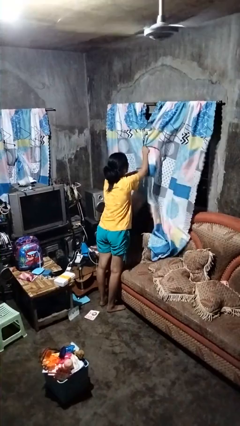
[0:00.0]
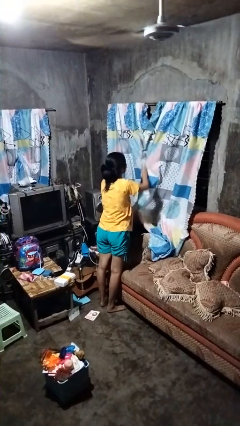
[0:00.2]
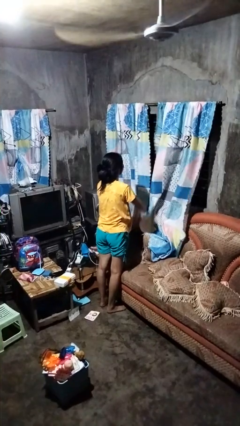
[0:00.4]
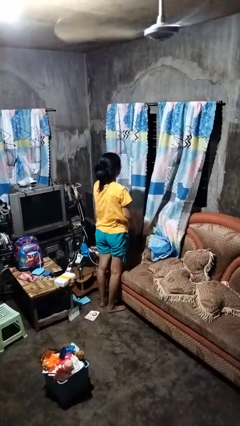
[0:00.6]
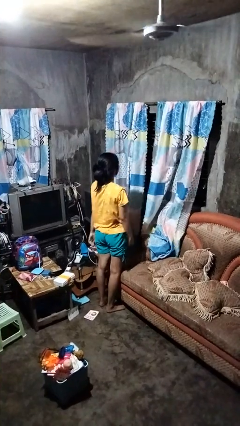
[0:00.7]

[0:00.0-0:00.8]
person opens curtains

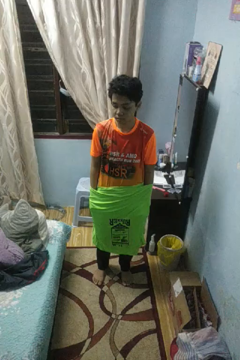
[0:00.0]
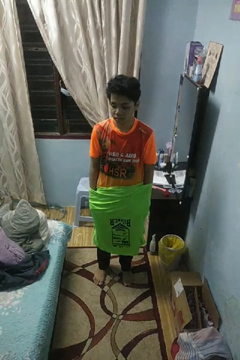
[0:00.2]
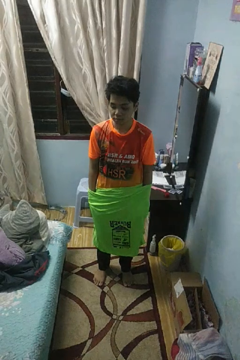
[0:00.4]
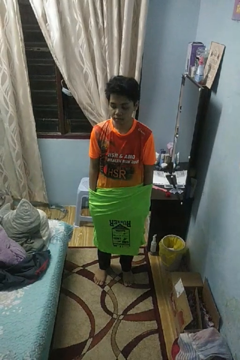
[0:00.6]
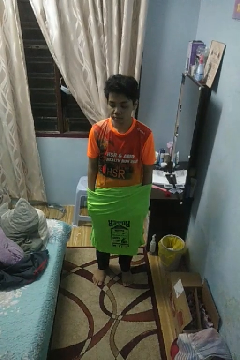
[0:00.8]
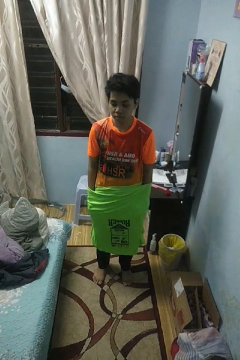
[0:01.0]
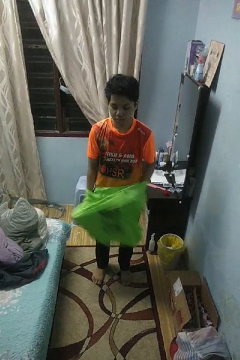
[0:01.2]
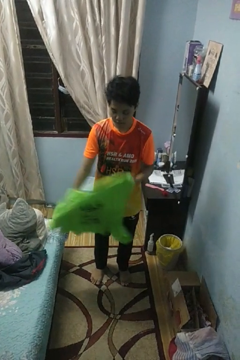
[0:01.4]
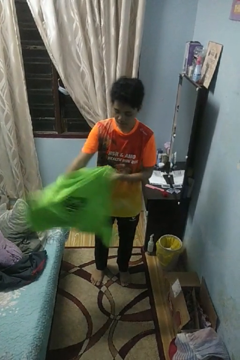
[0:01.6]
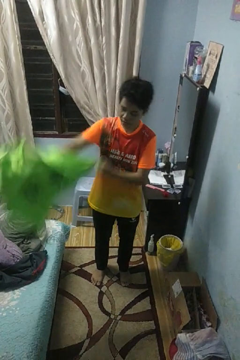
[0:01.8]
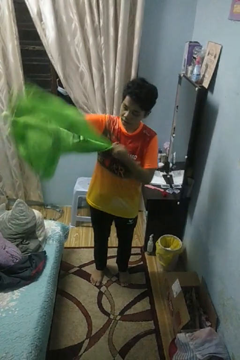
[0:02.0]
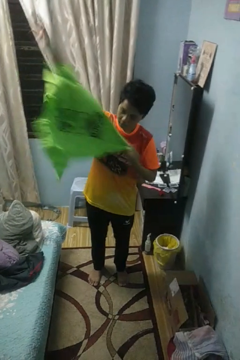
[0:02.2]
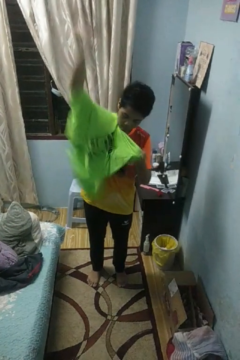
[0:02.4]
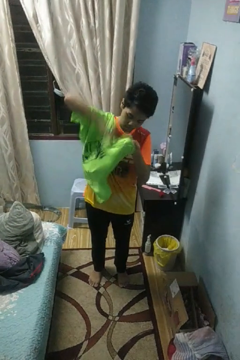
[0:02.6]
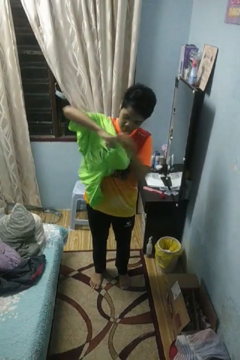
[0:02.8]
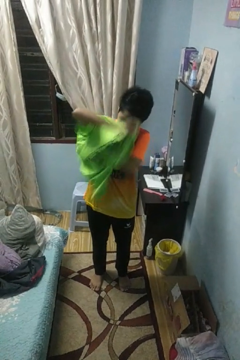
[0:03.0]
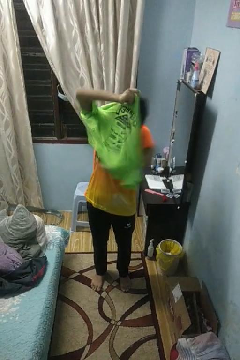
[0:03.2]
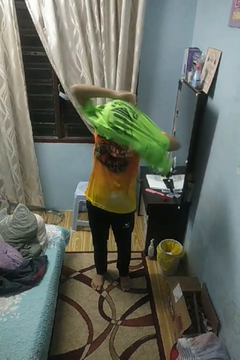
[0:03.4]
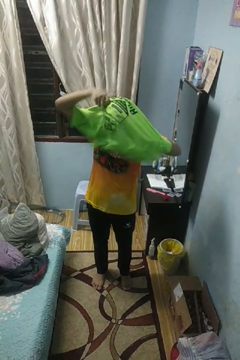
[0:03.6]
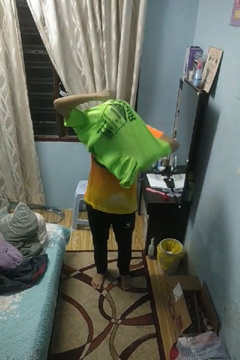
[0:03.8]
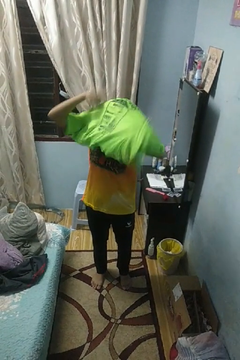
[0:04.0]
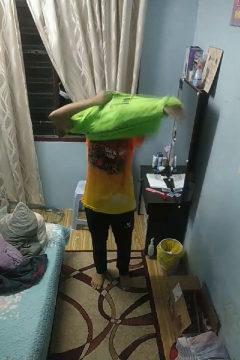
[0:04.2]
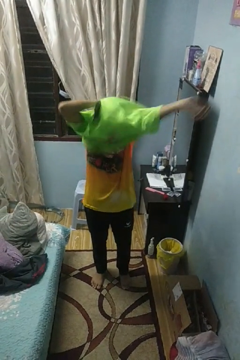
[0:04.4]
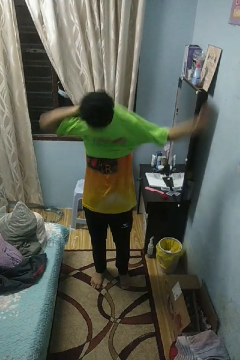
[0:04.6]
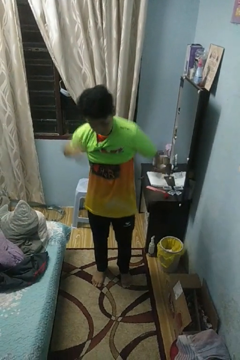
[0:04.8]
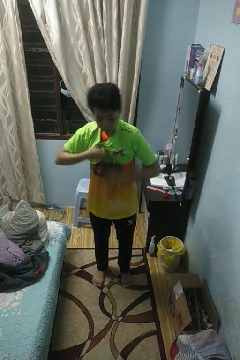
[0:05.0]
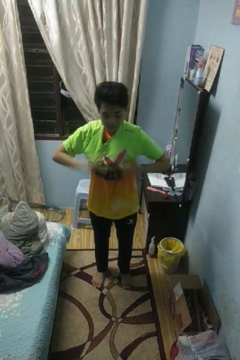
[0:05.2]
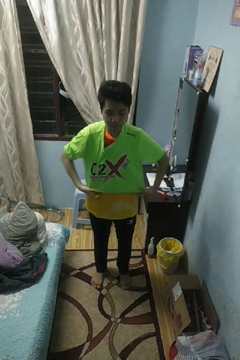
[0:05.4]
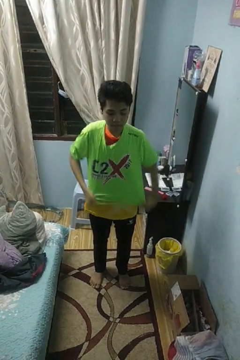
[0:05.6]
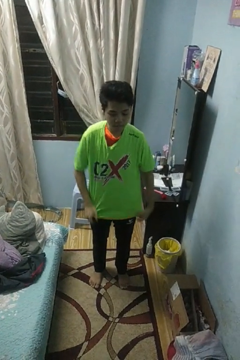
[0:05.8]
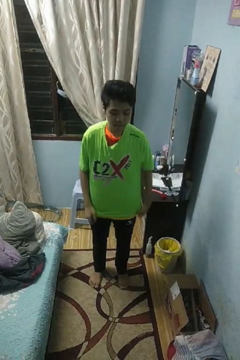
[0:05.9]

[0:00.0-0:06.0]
person puts on shirt

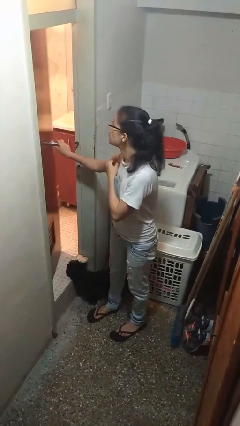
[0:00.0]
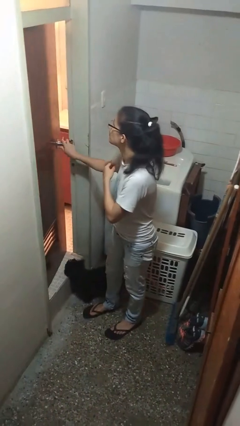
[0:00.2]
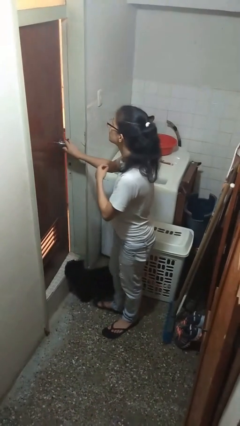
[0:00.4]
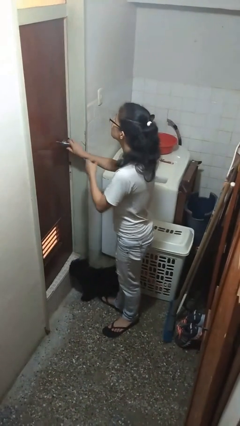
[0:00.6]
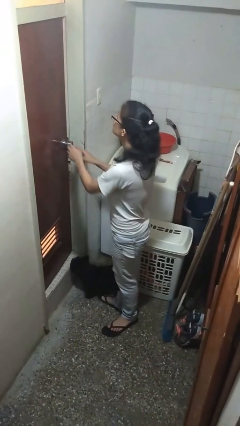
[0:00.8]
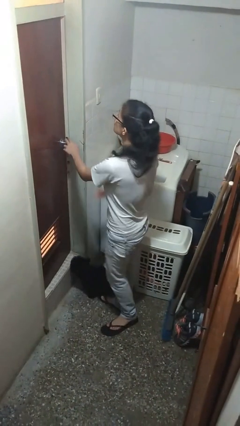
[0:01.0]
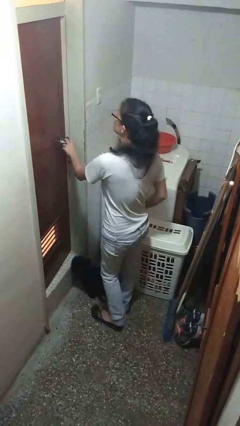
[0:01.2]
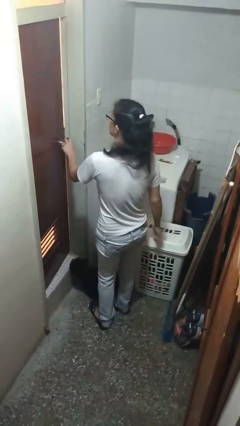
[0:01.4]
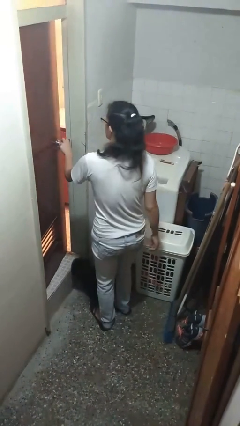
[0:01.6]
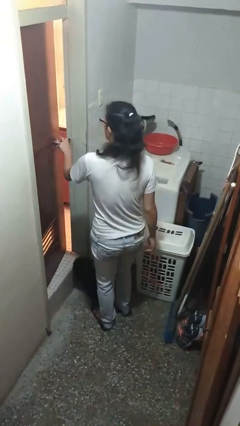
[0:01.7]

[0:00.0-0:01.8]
person closes facility door

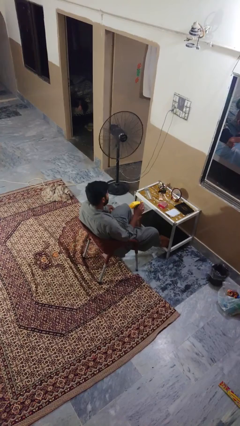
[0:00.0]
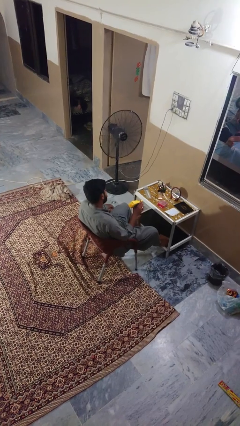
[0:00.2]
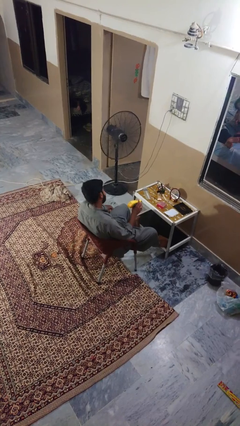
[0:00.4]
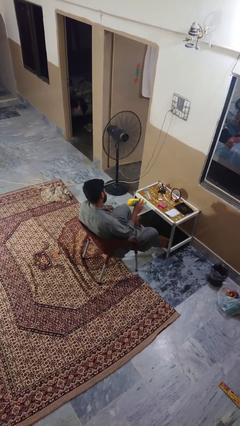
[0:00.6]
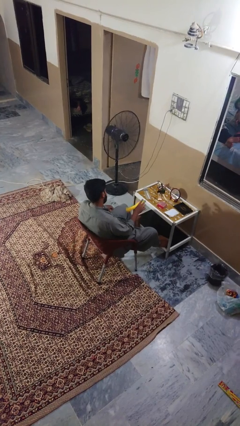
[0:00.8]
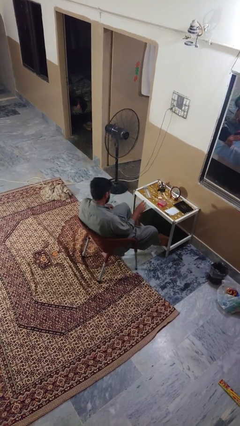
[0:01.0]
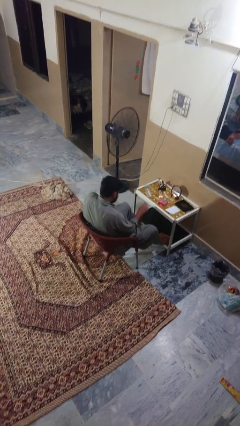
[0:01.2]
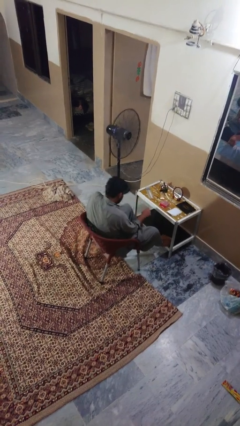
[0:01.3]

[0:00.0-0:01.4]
person throws object to ground

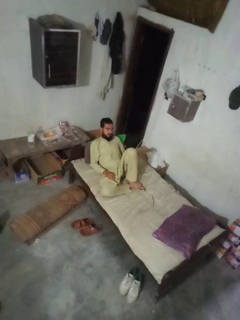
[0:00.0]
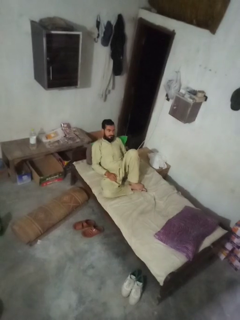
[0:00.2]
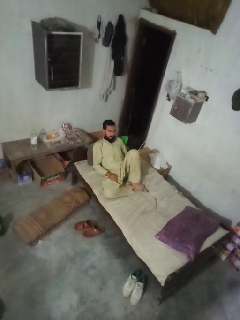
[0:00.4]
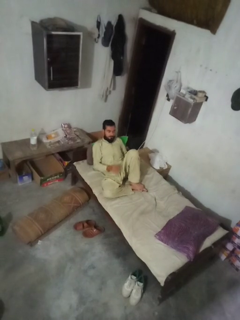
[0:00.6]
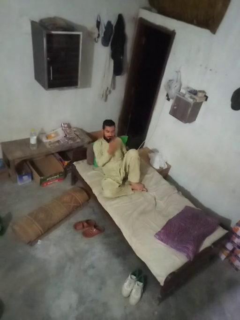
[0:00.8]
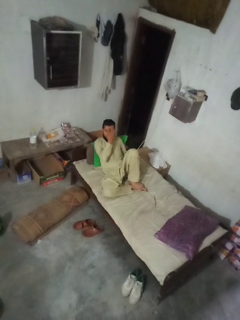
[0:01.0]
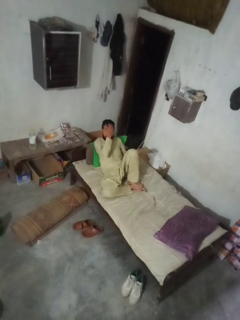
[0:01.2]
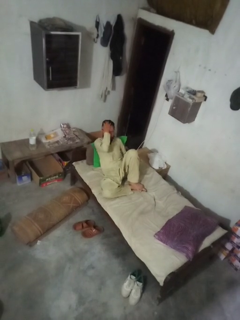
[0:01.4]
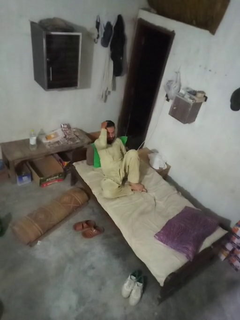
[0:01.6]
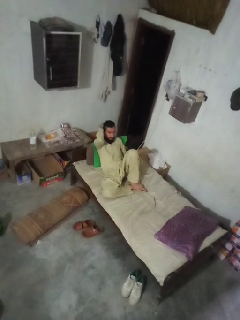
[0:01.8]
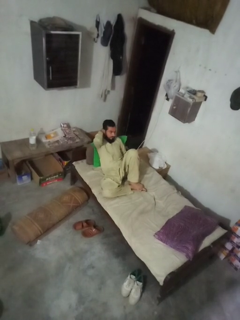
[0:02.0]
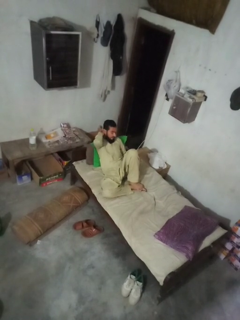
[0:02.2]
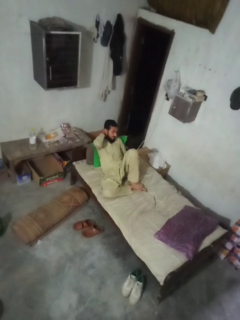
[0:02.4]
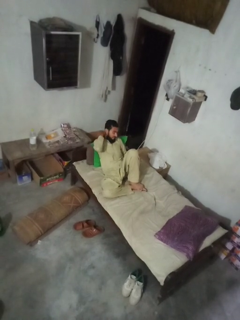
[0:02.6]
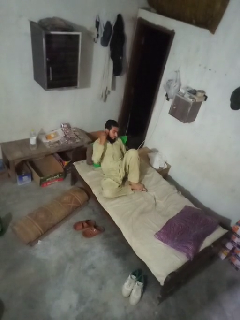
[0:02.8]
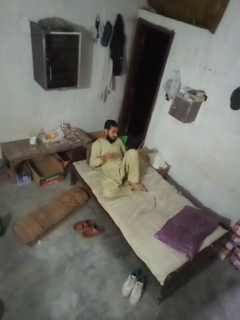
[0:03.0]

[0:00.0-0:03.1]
person strokes hair

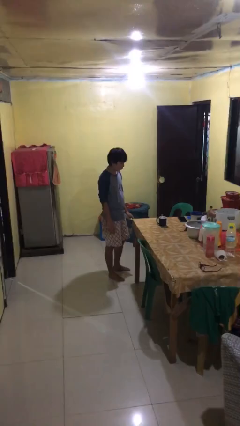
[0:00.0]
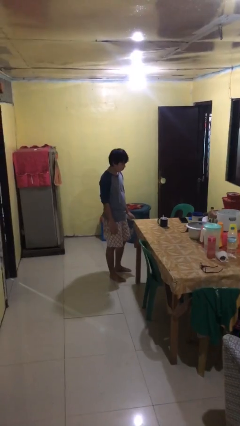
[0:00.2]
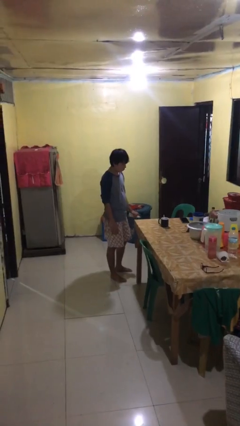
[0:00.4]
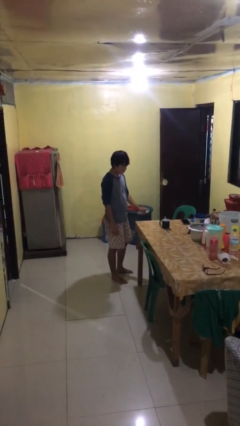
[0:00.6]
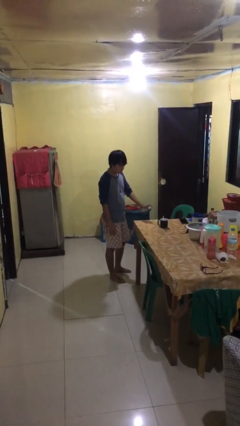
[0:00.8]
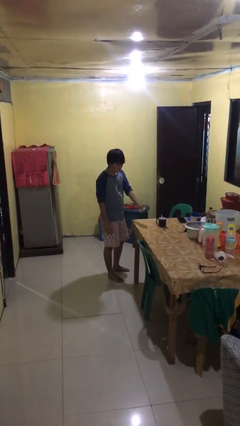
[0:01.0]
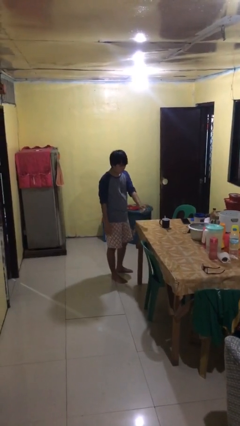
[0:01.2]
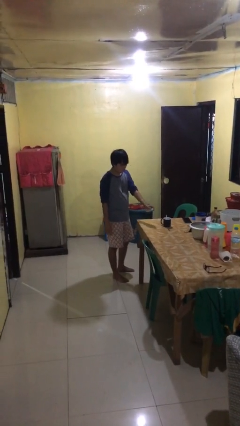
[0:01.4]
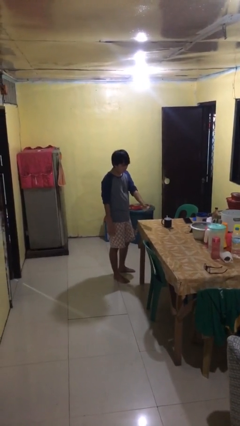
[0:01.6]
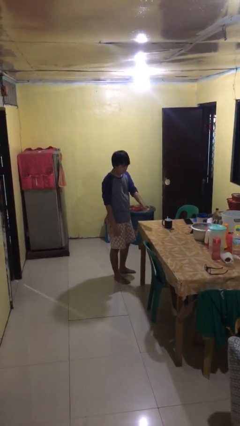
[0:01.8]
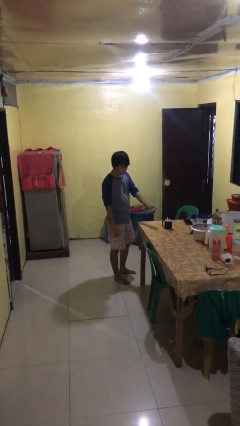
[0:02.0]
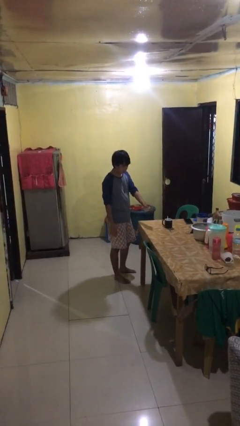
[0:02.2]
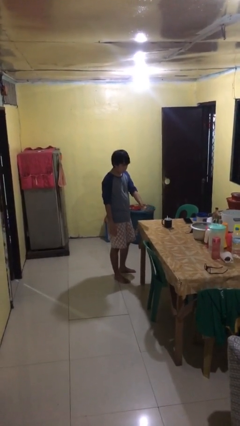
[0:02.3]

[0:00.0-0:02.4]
person sprays from bottle

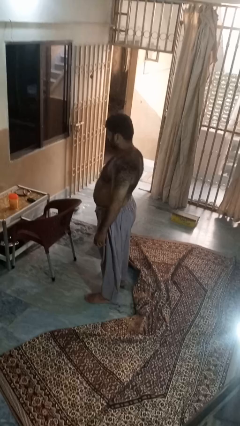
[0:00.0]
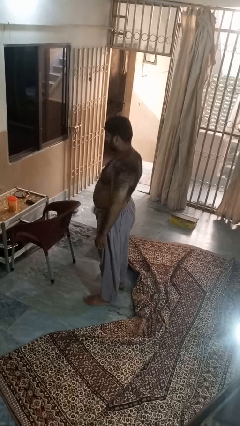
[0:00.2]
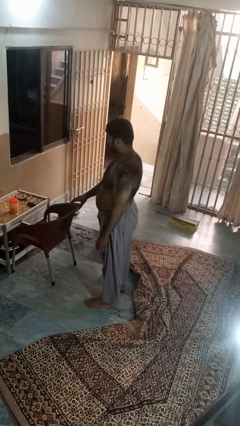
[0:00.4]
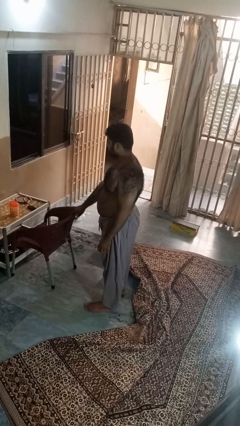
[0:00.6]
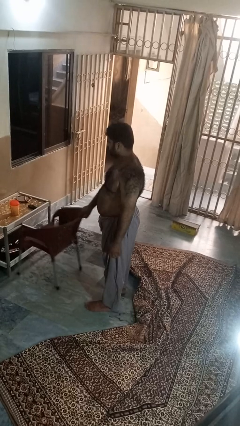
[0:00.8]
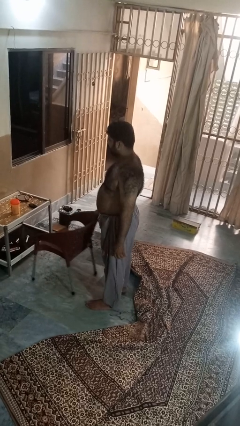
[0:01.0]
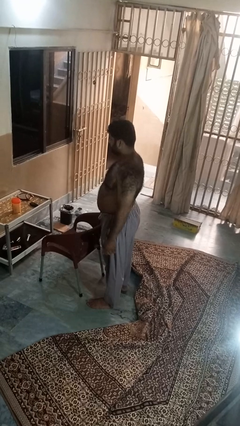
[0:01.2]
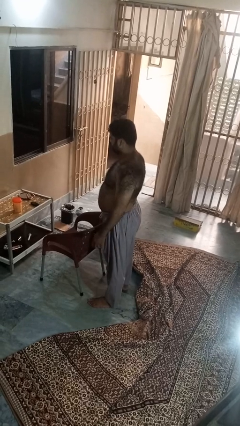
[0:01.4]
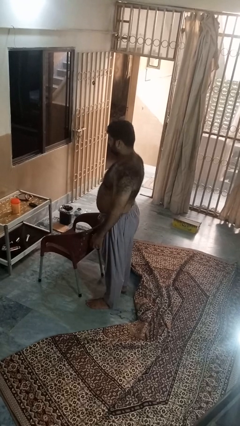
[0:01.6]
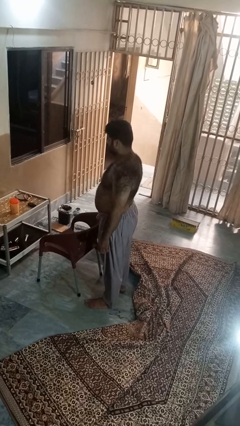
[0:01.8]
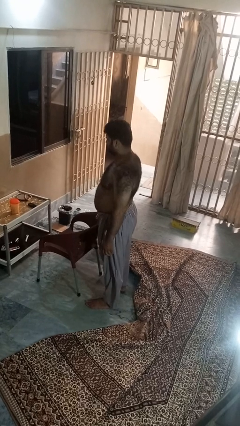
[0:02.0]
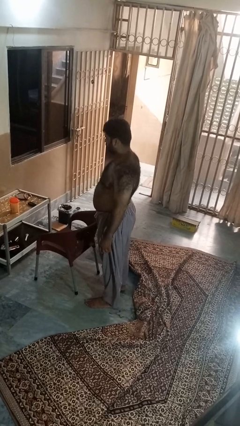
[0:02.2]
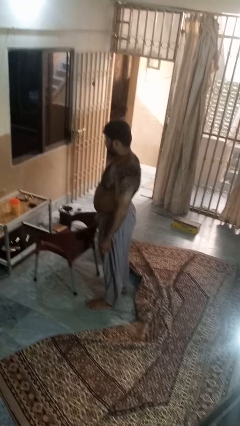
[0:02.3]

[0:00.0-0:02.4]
person pulls out chair

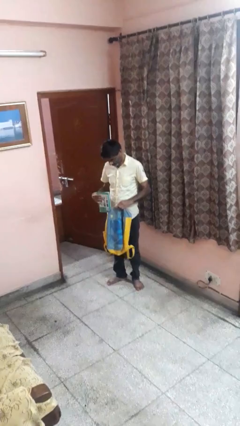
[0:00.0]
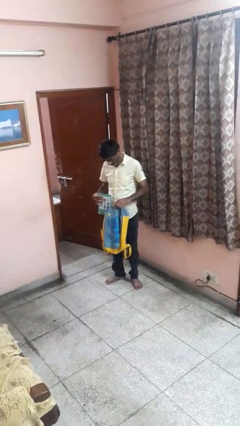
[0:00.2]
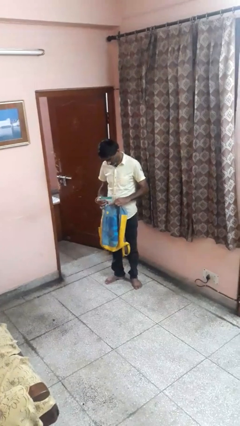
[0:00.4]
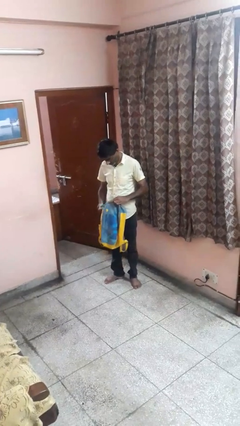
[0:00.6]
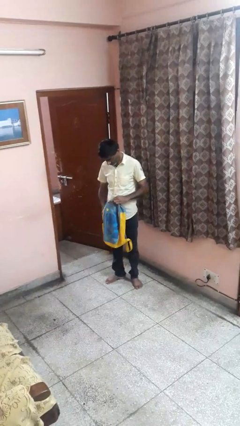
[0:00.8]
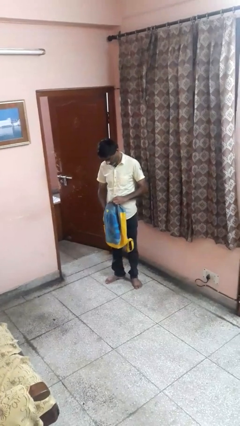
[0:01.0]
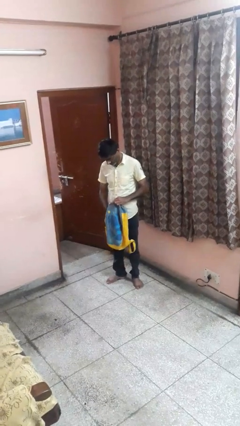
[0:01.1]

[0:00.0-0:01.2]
person puts object into backpack
